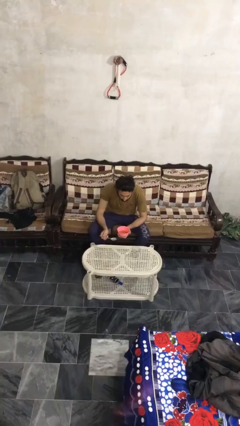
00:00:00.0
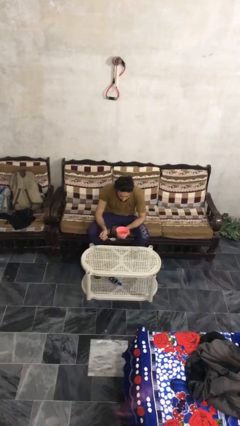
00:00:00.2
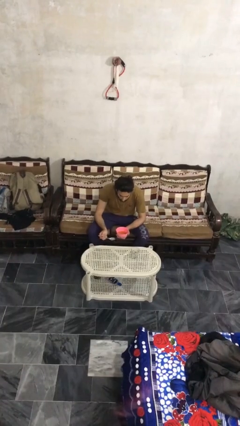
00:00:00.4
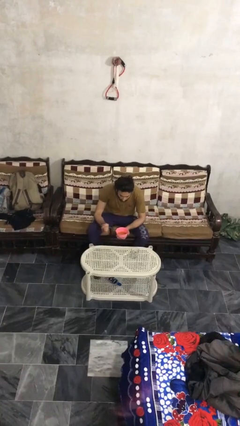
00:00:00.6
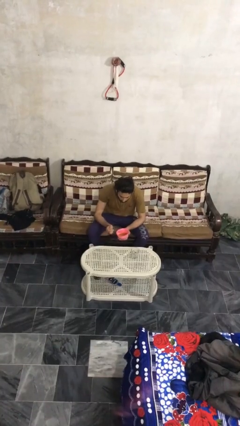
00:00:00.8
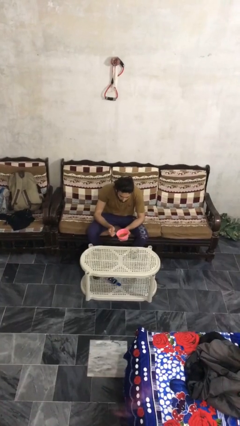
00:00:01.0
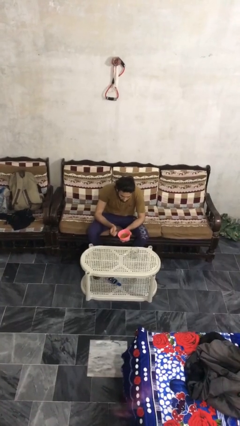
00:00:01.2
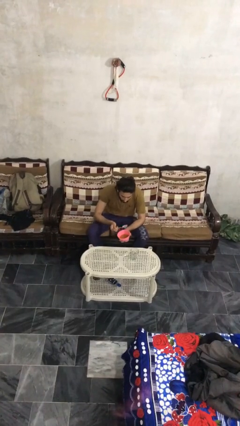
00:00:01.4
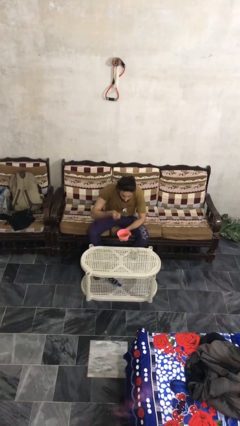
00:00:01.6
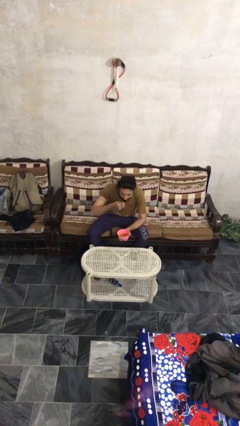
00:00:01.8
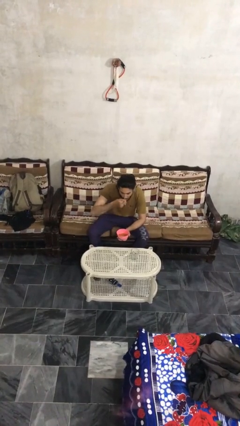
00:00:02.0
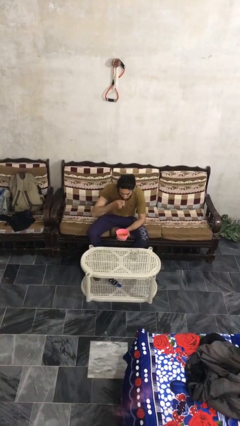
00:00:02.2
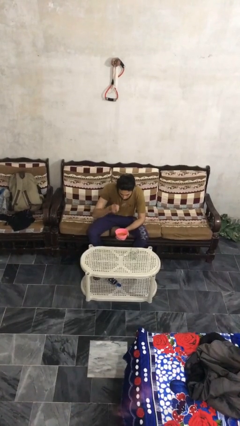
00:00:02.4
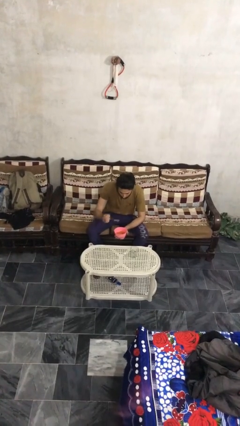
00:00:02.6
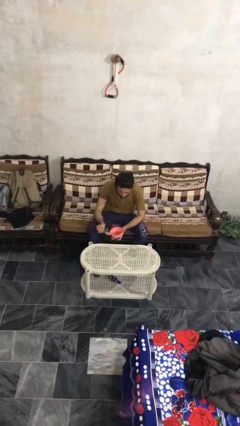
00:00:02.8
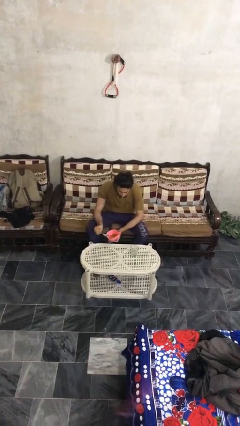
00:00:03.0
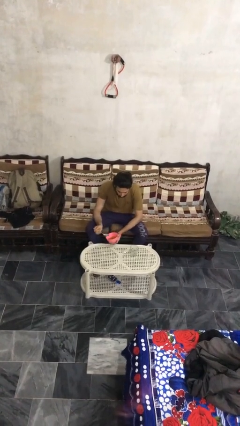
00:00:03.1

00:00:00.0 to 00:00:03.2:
person eats with utensil

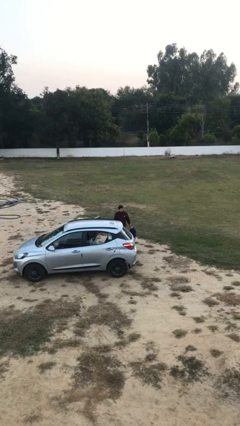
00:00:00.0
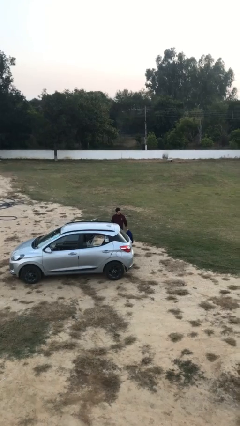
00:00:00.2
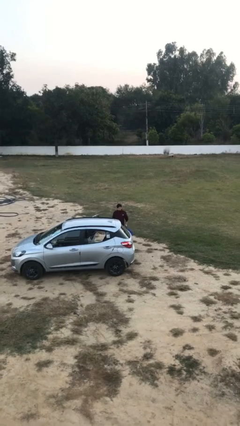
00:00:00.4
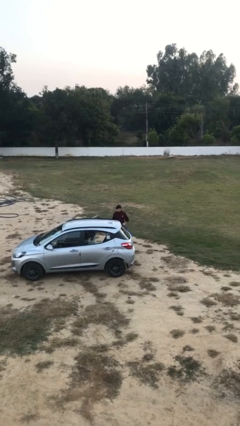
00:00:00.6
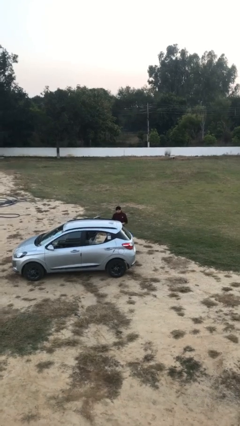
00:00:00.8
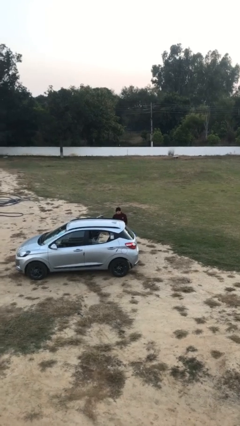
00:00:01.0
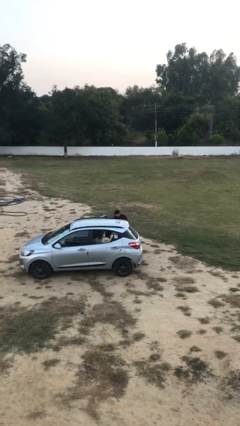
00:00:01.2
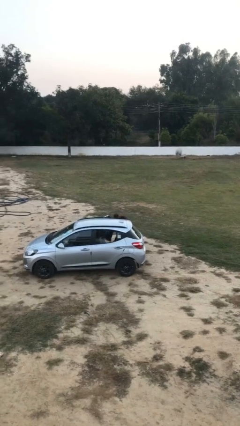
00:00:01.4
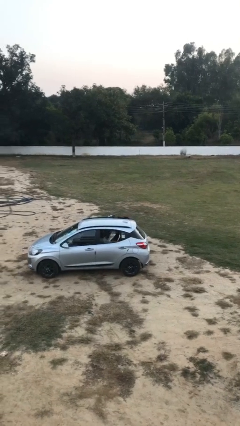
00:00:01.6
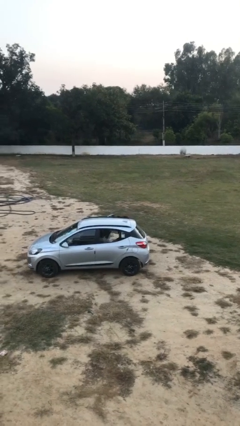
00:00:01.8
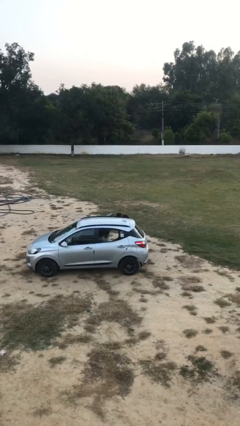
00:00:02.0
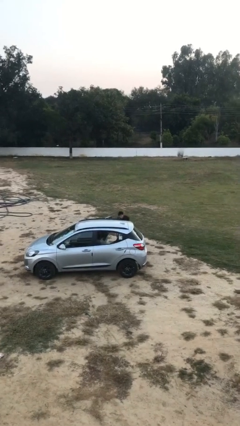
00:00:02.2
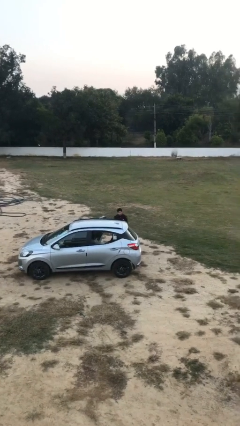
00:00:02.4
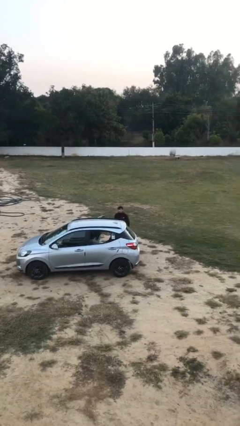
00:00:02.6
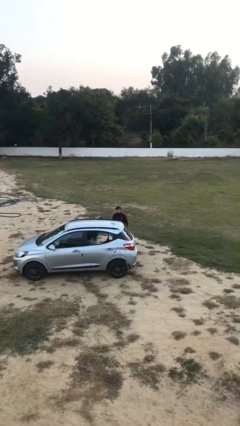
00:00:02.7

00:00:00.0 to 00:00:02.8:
person loads car

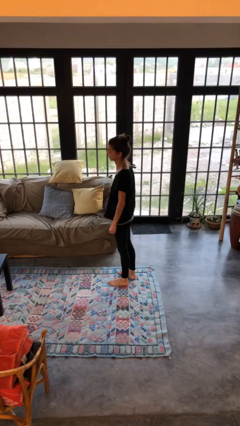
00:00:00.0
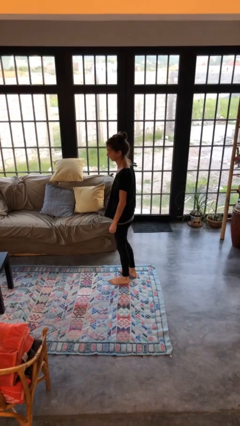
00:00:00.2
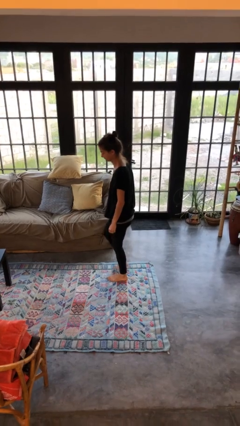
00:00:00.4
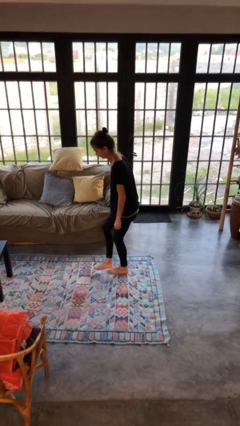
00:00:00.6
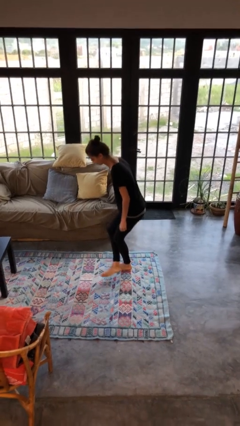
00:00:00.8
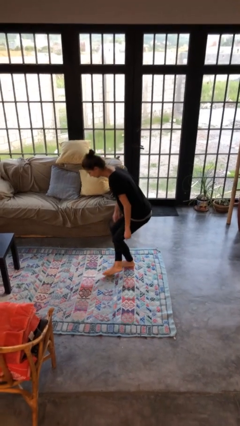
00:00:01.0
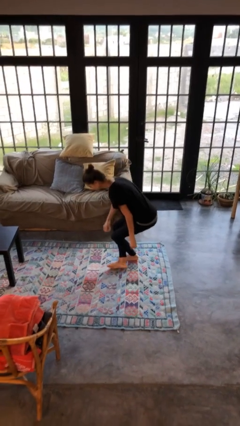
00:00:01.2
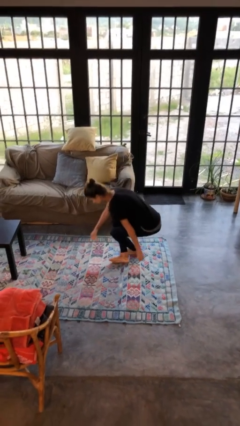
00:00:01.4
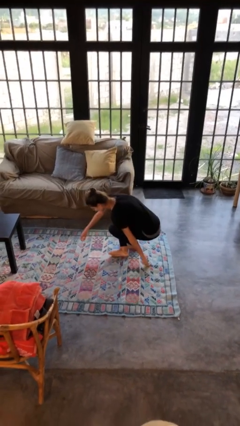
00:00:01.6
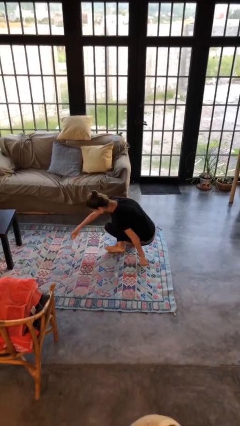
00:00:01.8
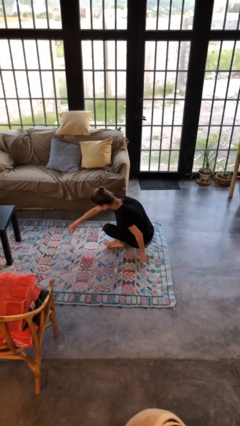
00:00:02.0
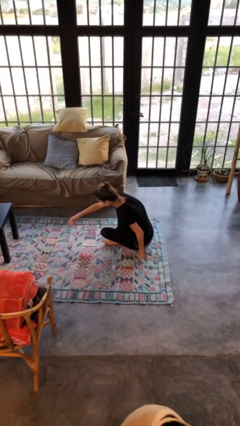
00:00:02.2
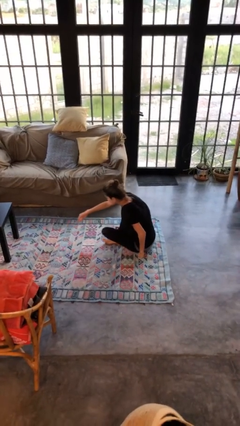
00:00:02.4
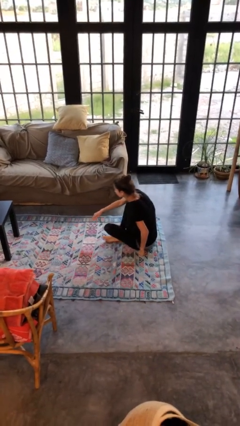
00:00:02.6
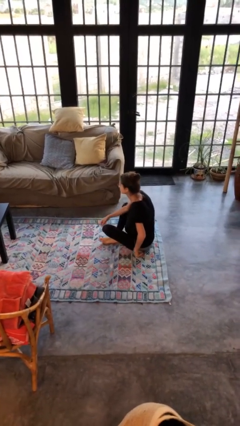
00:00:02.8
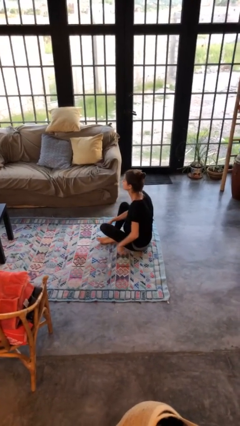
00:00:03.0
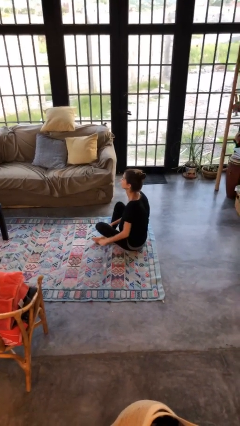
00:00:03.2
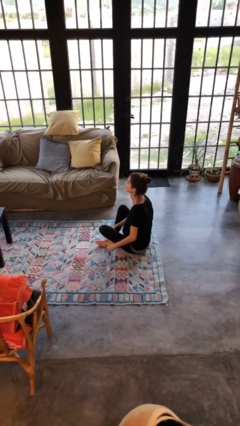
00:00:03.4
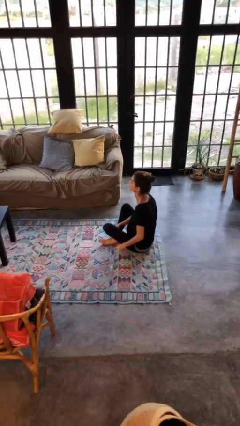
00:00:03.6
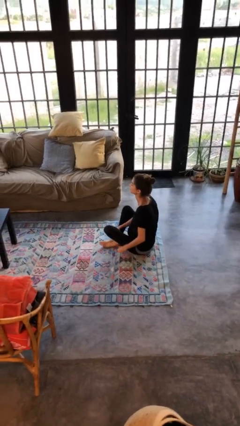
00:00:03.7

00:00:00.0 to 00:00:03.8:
person sits crisscross

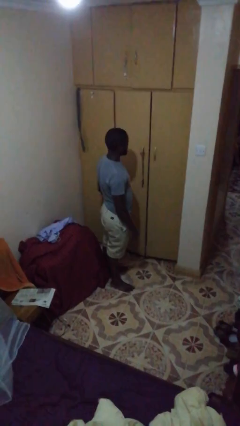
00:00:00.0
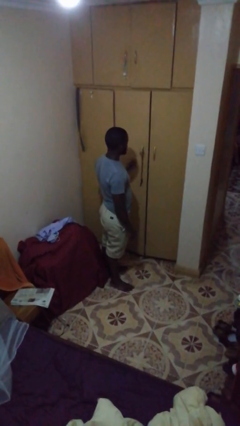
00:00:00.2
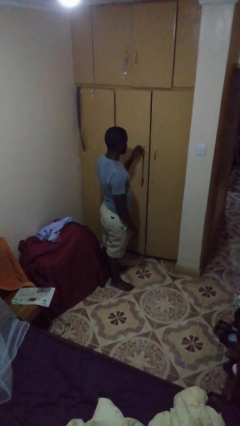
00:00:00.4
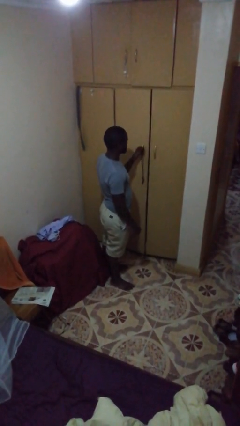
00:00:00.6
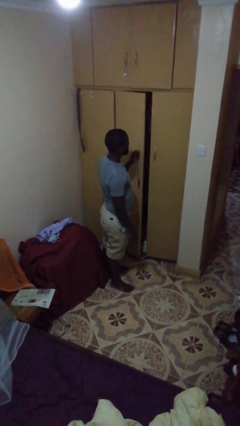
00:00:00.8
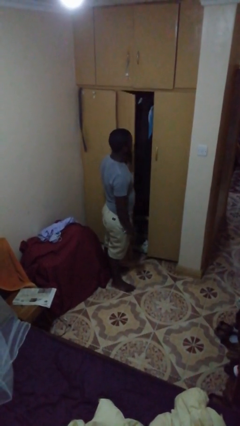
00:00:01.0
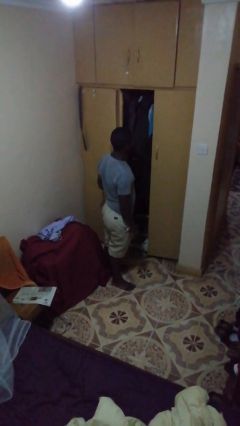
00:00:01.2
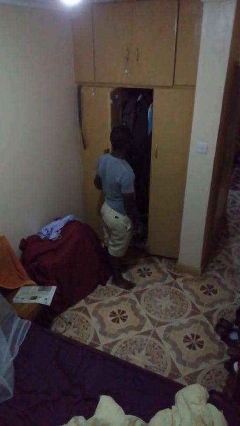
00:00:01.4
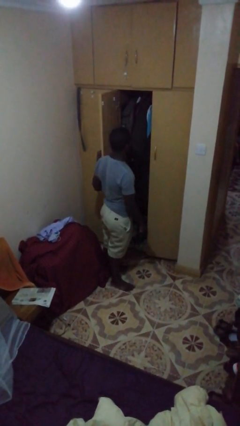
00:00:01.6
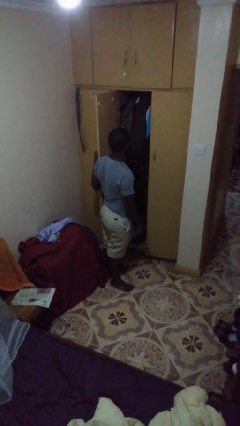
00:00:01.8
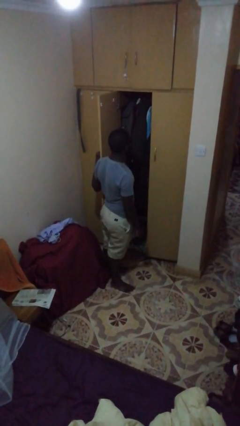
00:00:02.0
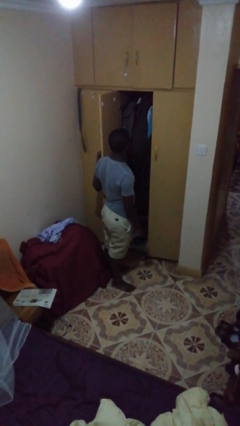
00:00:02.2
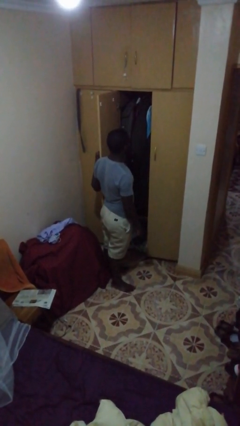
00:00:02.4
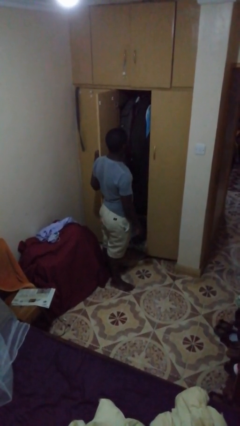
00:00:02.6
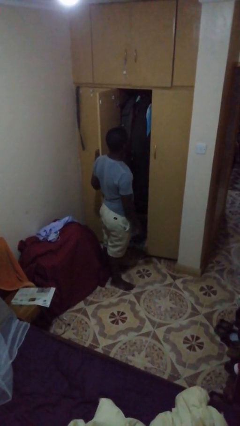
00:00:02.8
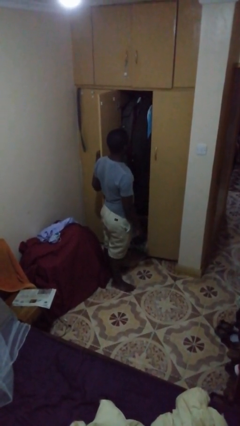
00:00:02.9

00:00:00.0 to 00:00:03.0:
person opens closet door

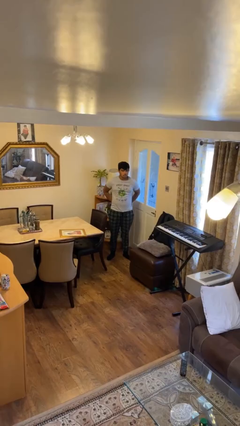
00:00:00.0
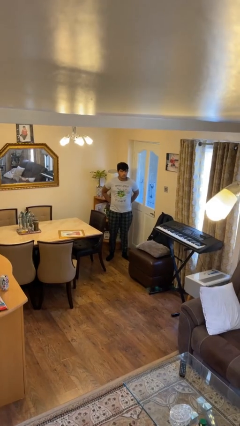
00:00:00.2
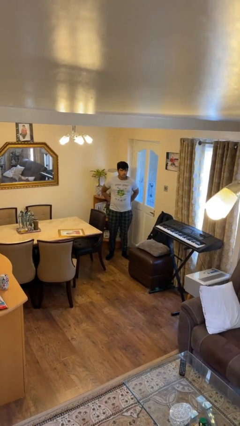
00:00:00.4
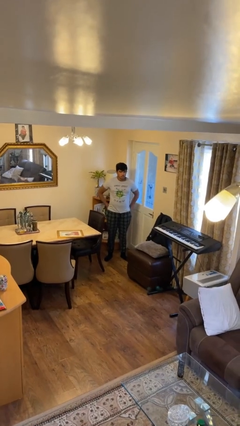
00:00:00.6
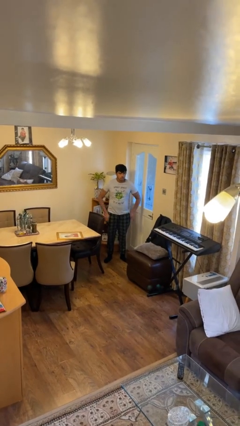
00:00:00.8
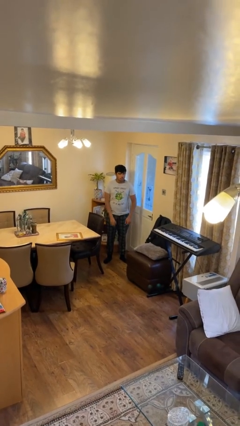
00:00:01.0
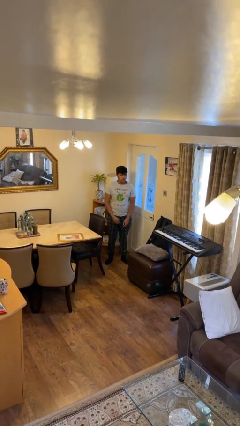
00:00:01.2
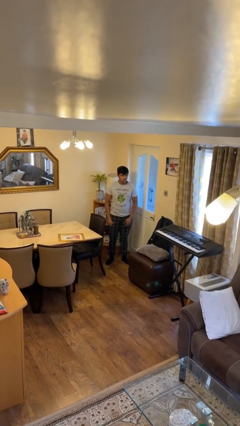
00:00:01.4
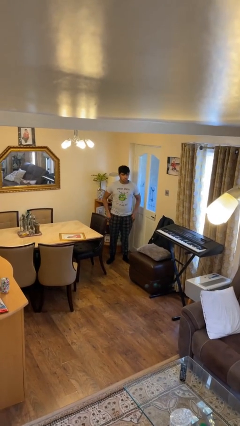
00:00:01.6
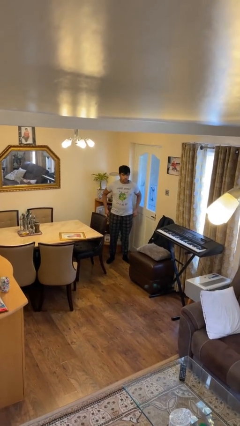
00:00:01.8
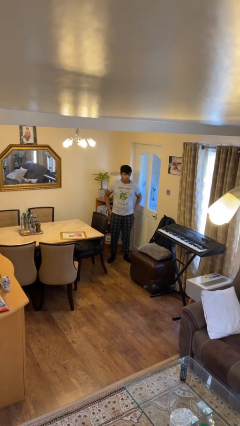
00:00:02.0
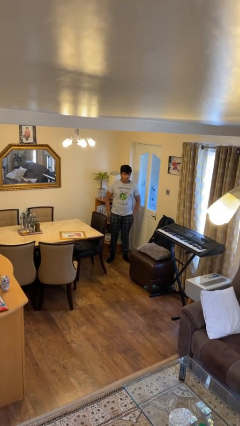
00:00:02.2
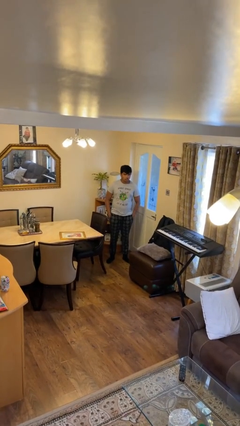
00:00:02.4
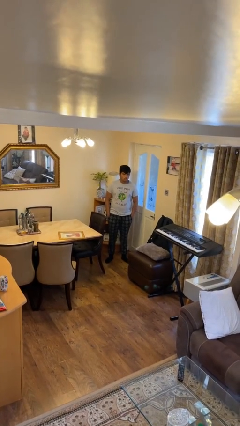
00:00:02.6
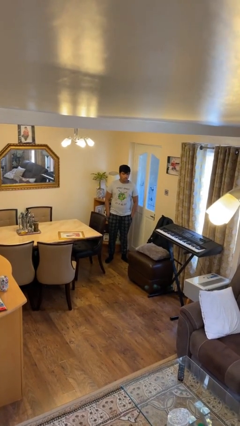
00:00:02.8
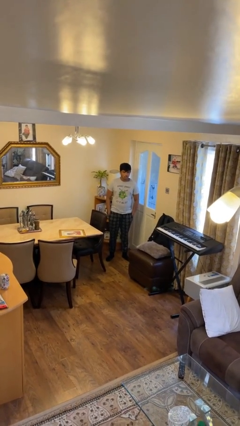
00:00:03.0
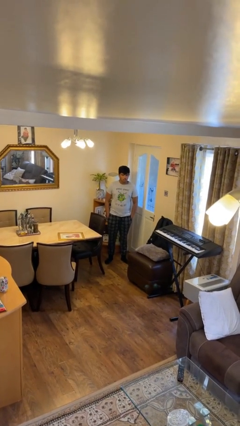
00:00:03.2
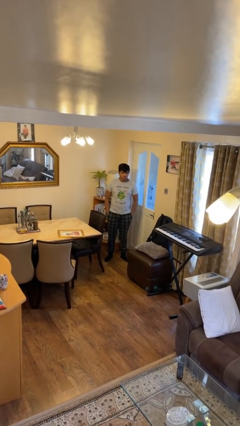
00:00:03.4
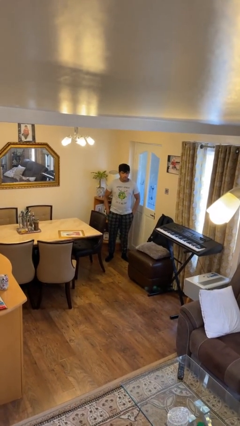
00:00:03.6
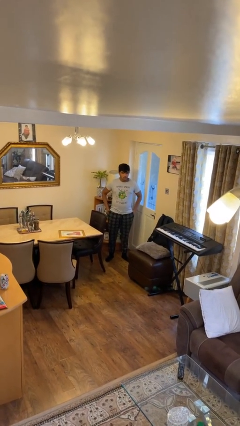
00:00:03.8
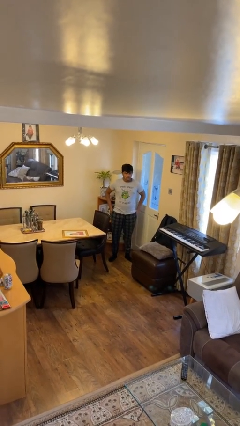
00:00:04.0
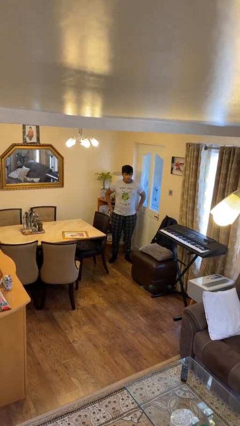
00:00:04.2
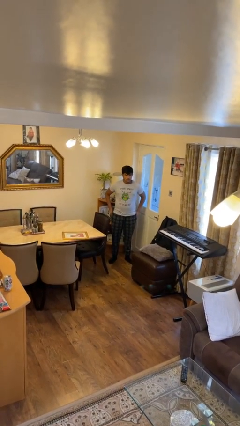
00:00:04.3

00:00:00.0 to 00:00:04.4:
person puts hands in back pockets
